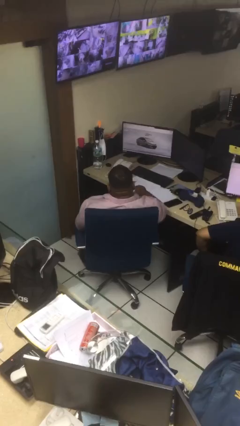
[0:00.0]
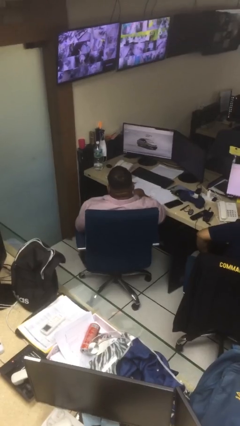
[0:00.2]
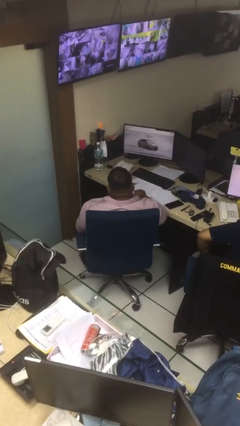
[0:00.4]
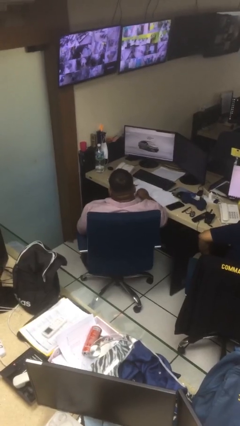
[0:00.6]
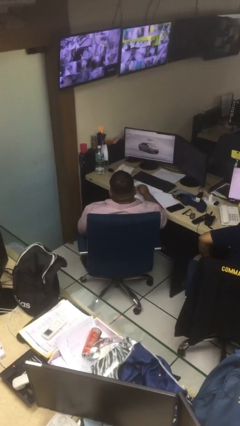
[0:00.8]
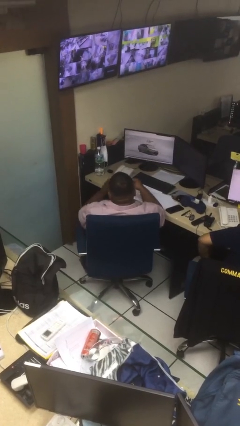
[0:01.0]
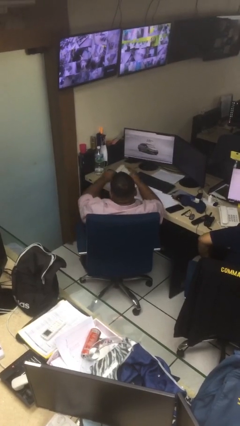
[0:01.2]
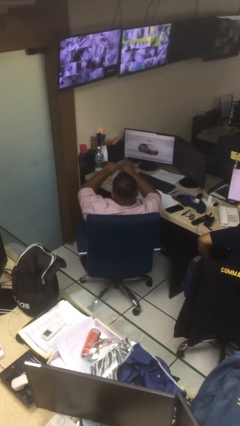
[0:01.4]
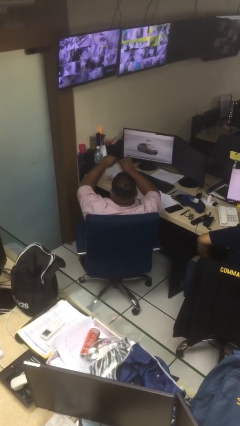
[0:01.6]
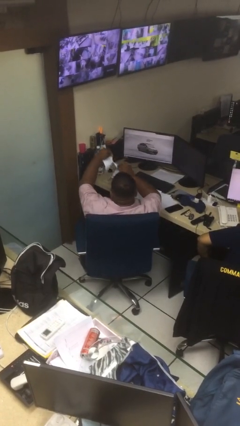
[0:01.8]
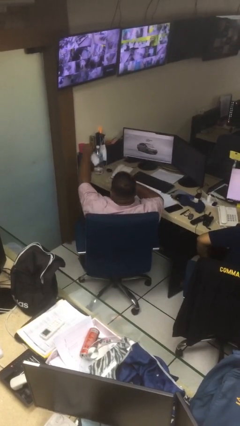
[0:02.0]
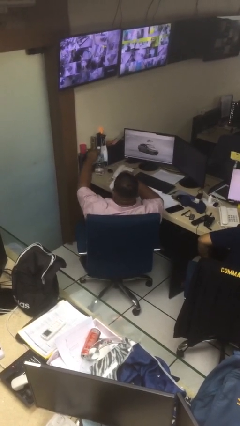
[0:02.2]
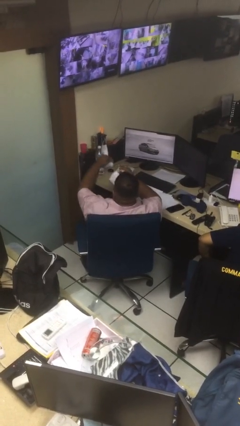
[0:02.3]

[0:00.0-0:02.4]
person tears paper

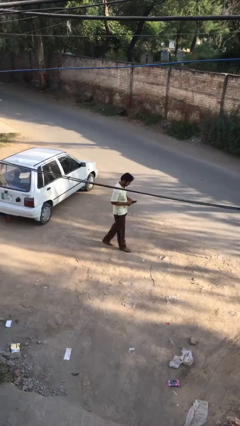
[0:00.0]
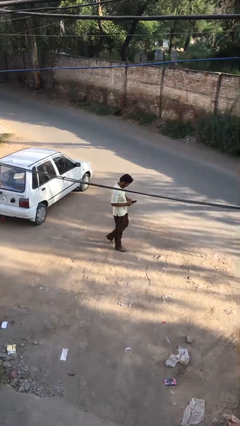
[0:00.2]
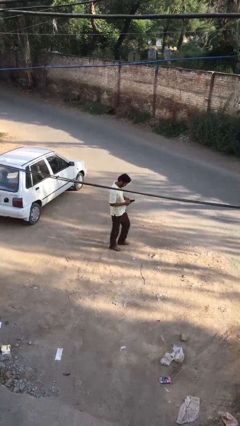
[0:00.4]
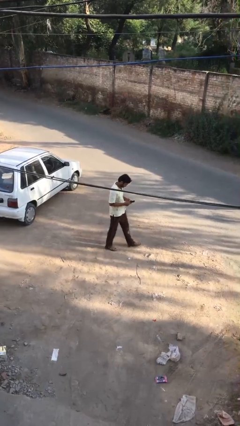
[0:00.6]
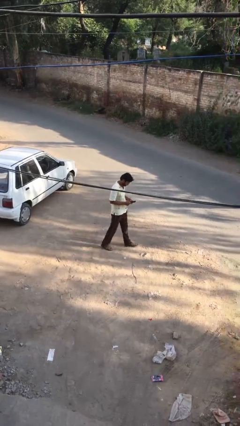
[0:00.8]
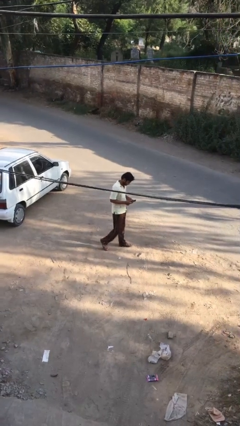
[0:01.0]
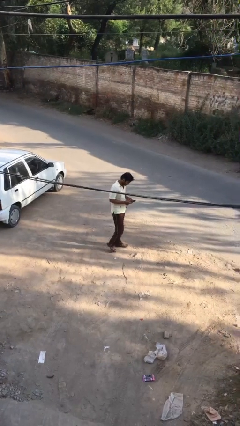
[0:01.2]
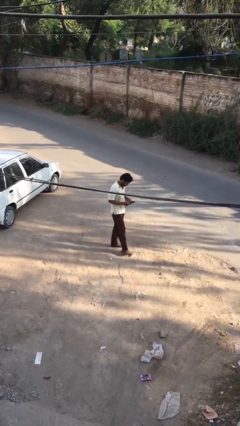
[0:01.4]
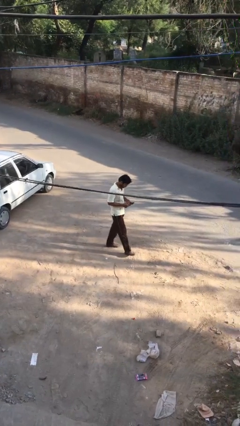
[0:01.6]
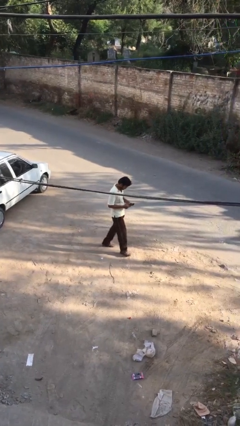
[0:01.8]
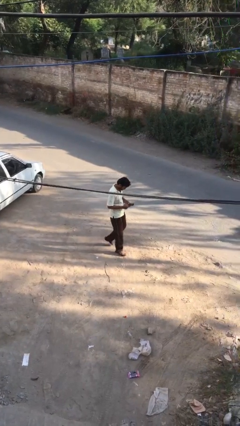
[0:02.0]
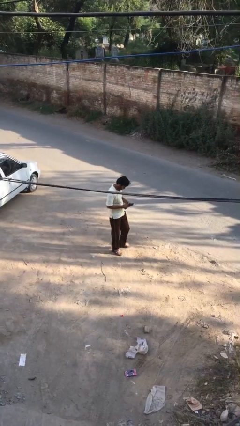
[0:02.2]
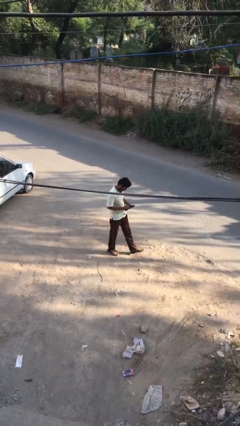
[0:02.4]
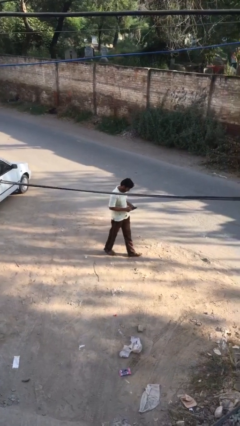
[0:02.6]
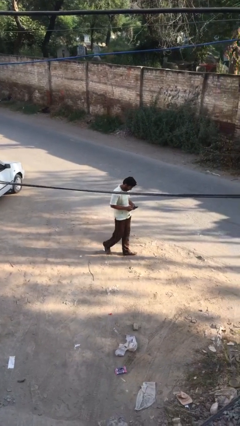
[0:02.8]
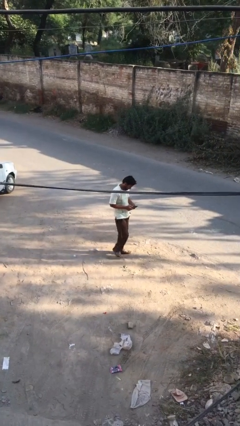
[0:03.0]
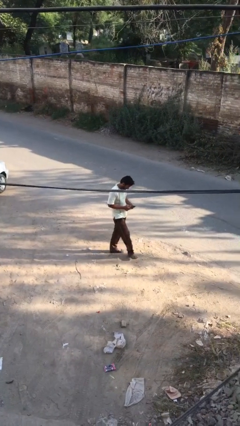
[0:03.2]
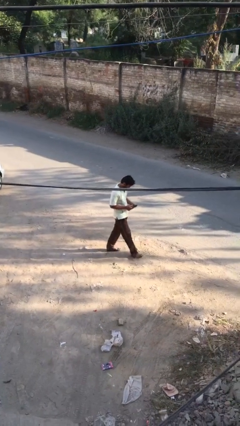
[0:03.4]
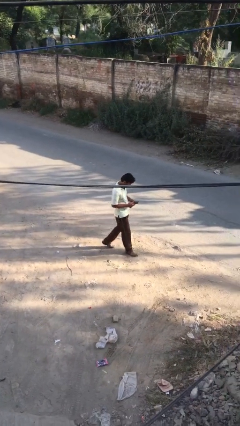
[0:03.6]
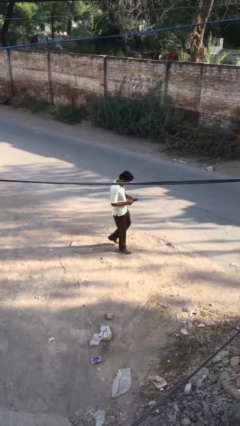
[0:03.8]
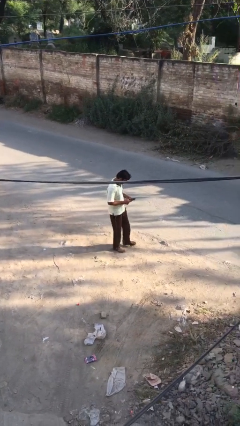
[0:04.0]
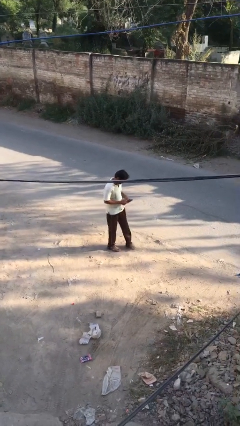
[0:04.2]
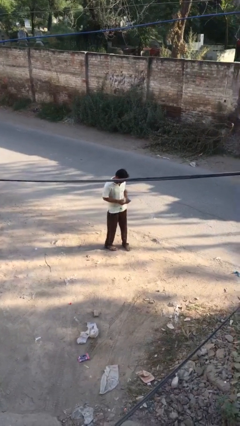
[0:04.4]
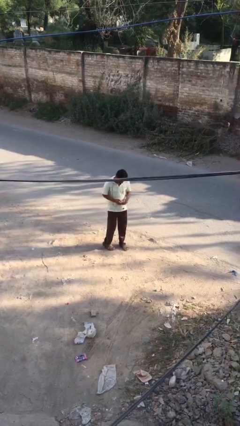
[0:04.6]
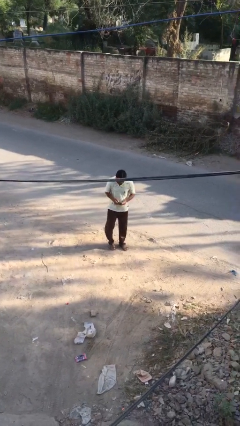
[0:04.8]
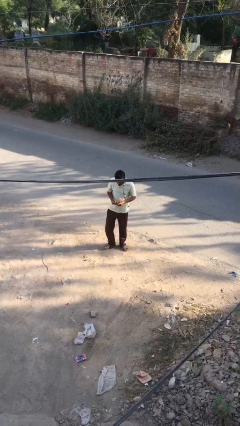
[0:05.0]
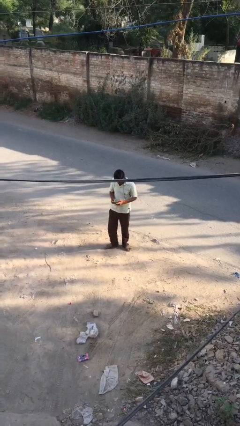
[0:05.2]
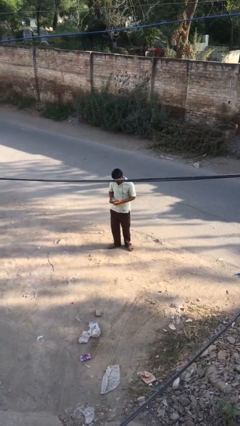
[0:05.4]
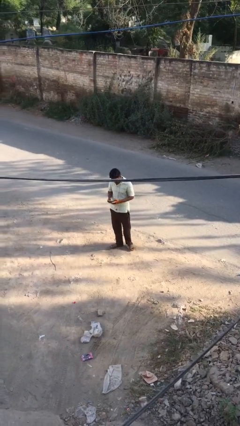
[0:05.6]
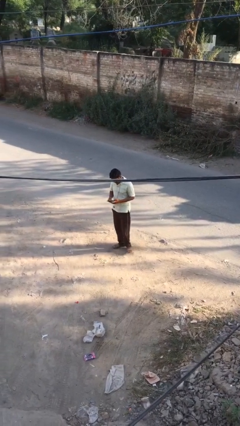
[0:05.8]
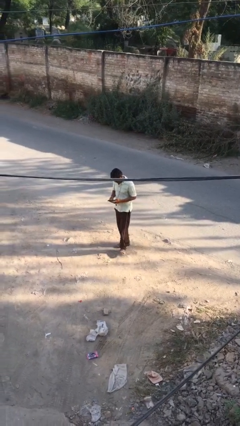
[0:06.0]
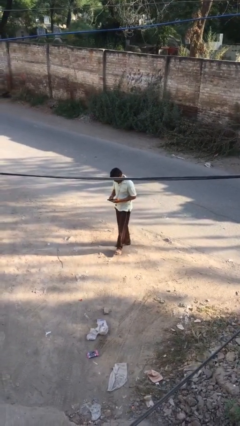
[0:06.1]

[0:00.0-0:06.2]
person texts on phone

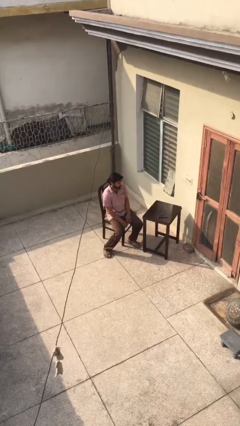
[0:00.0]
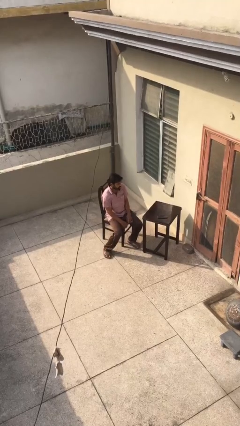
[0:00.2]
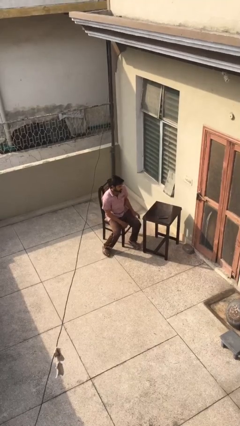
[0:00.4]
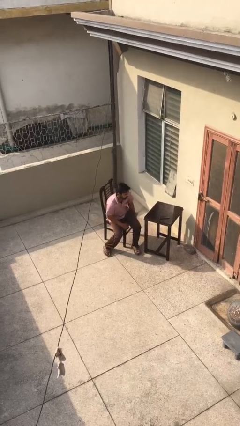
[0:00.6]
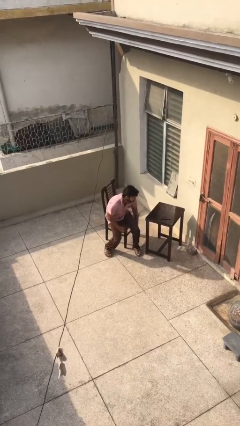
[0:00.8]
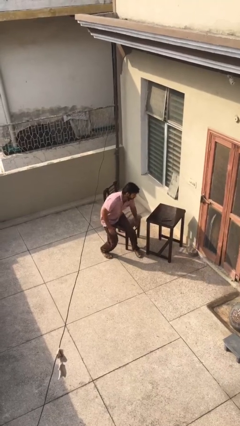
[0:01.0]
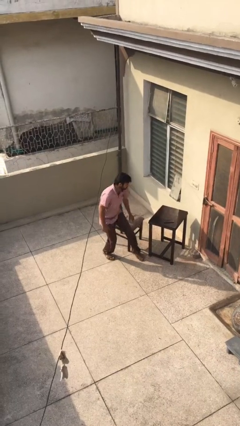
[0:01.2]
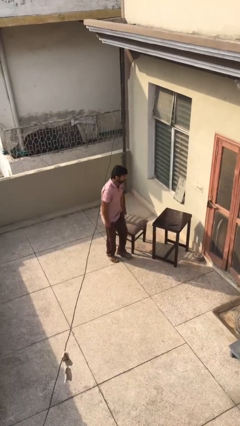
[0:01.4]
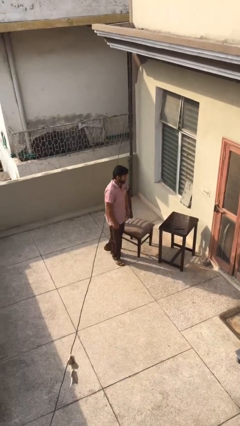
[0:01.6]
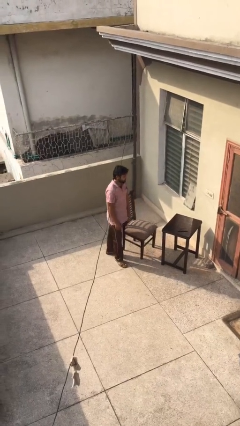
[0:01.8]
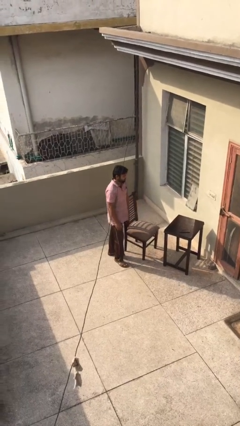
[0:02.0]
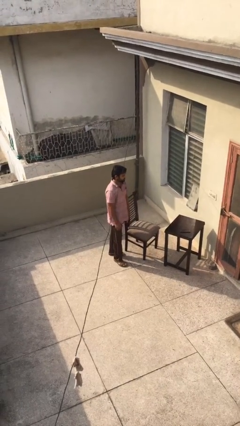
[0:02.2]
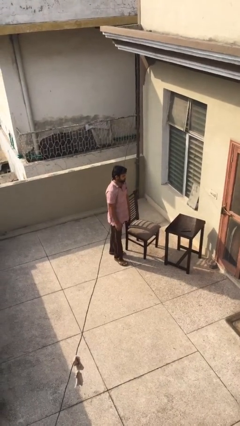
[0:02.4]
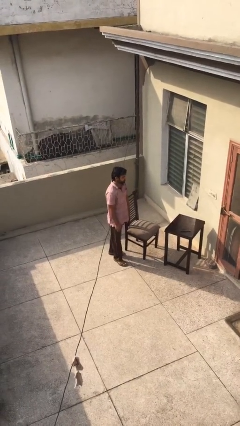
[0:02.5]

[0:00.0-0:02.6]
person stands up

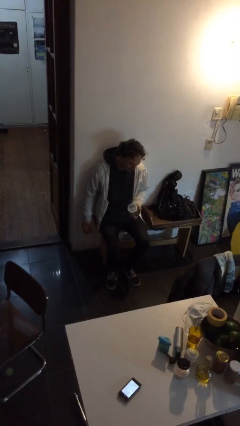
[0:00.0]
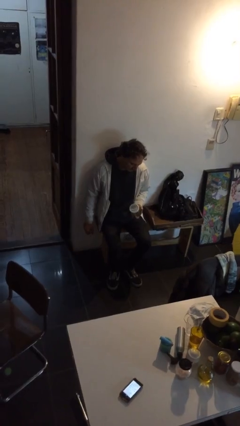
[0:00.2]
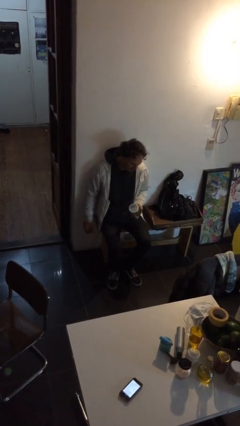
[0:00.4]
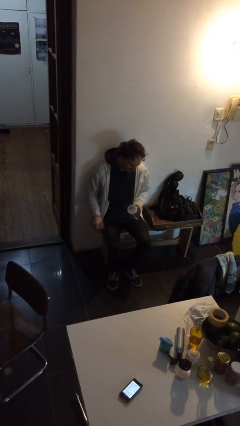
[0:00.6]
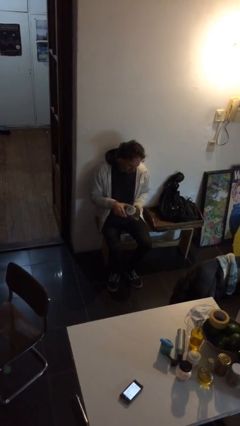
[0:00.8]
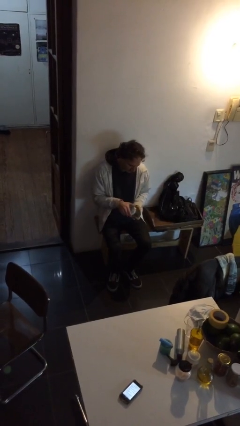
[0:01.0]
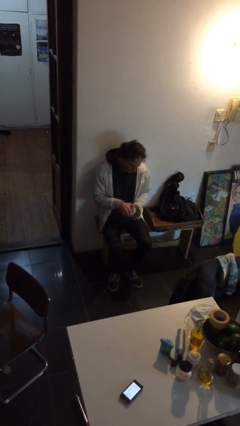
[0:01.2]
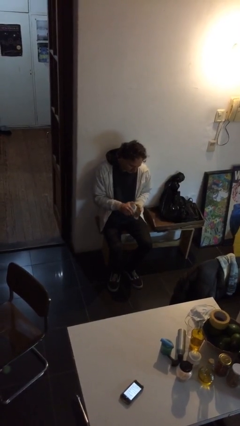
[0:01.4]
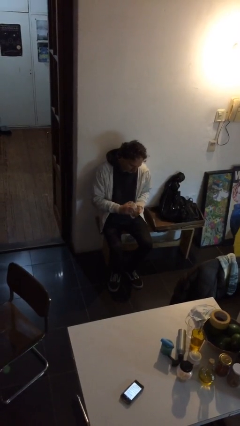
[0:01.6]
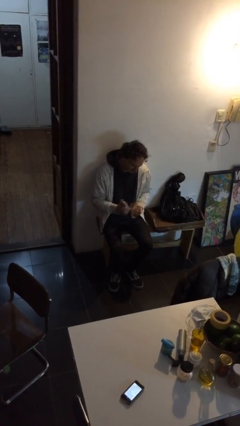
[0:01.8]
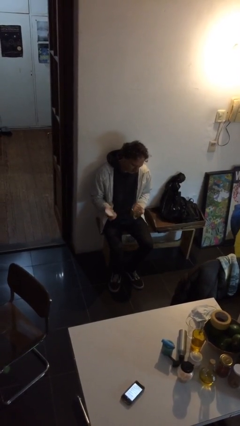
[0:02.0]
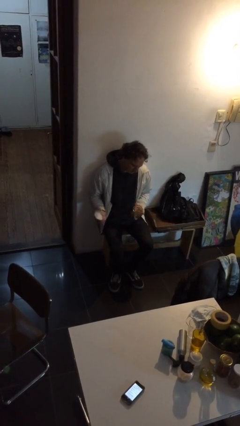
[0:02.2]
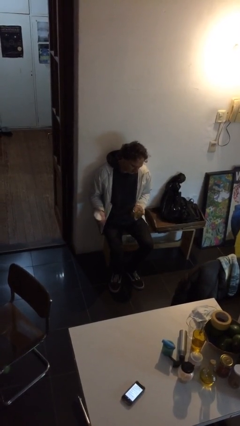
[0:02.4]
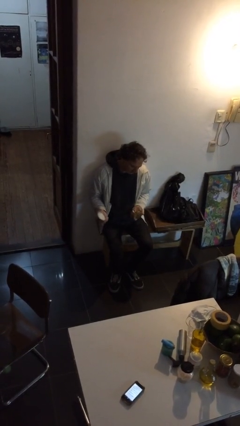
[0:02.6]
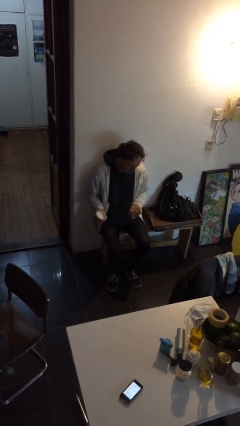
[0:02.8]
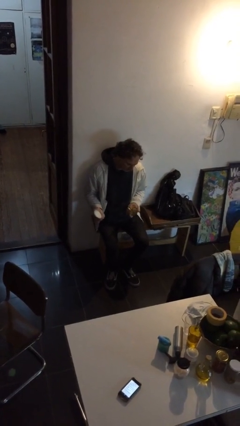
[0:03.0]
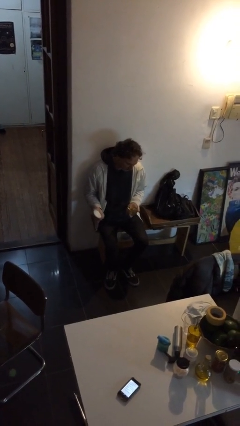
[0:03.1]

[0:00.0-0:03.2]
person opens jar

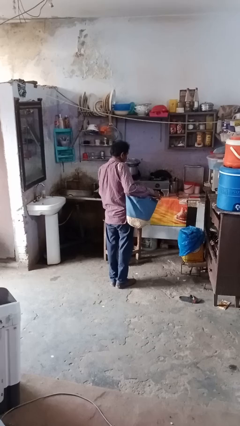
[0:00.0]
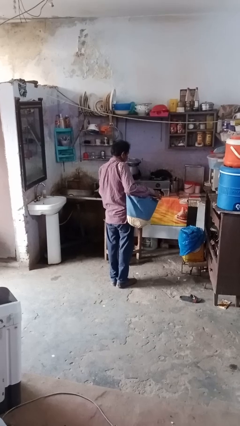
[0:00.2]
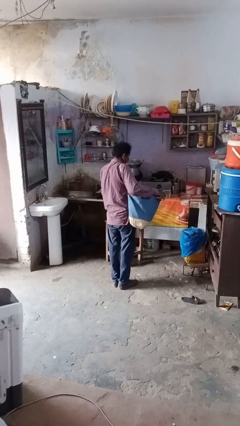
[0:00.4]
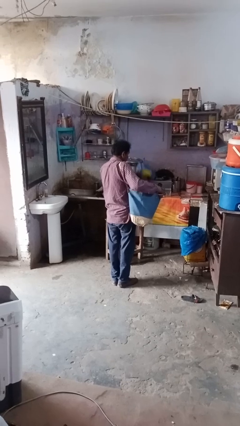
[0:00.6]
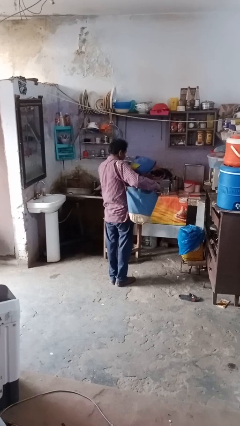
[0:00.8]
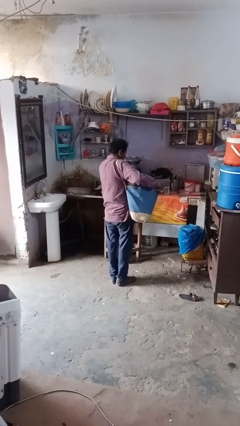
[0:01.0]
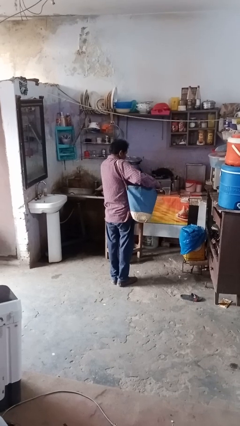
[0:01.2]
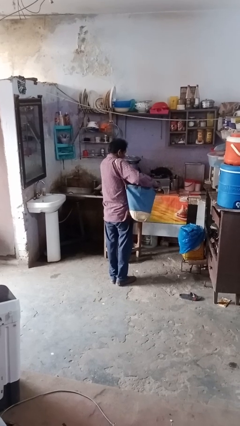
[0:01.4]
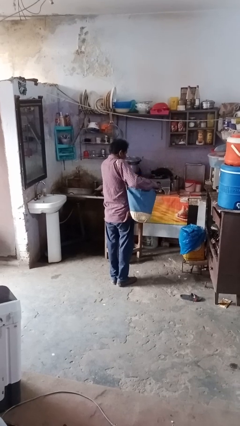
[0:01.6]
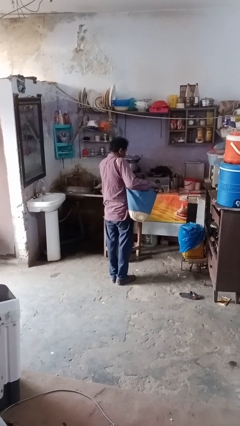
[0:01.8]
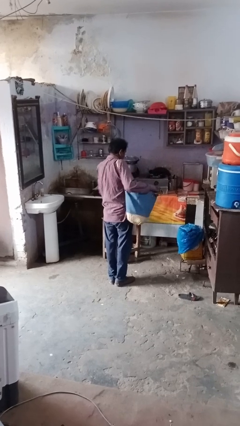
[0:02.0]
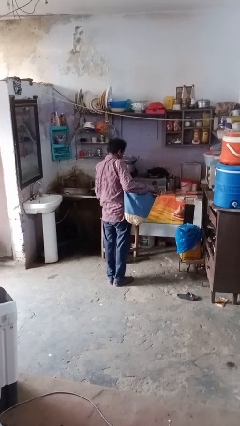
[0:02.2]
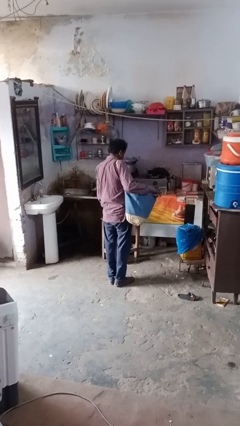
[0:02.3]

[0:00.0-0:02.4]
person puts object into bag

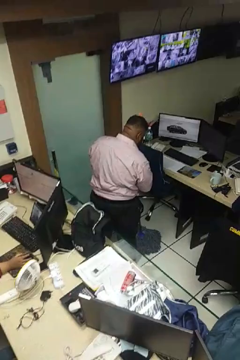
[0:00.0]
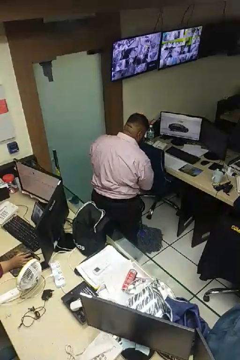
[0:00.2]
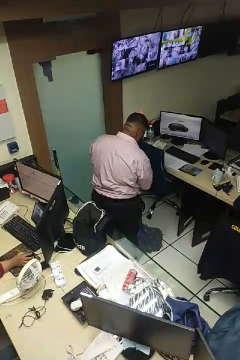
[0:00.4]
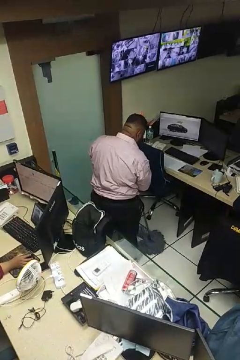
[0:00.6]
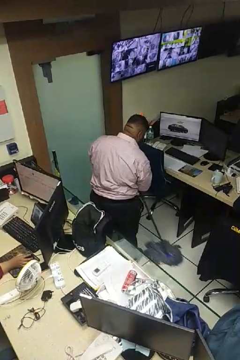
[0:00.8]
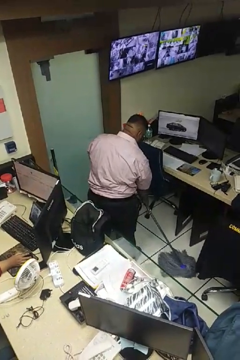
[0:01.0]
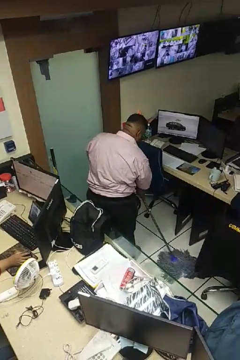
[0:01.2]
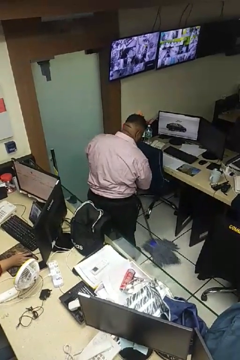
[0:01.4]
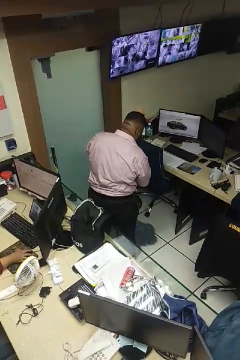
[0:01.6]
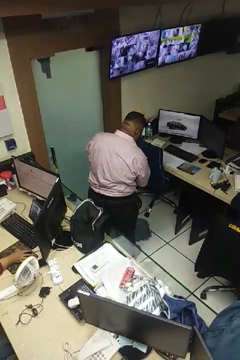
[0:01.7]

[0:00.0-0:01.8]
person mops
